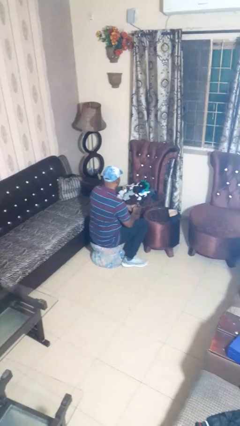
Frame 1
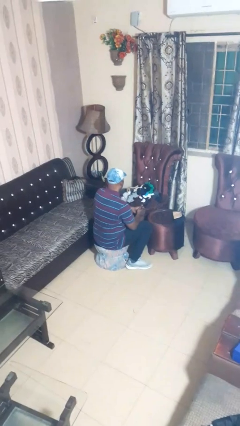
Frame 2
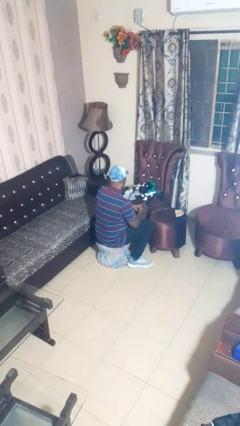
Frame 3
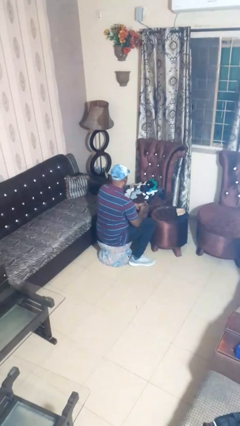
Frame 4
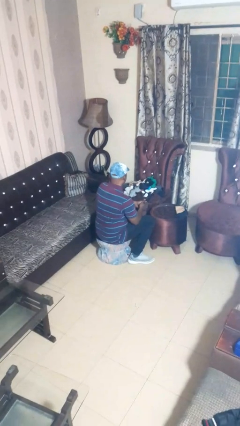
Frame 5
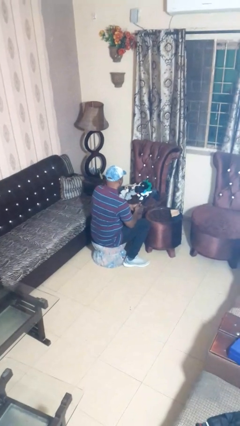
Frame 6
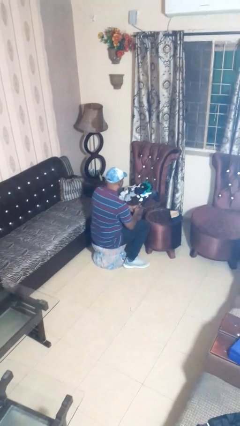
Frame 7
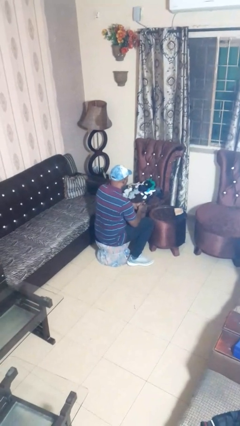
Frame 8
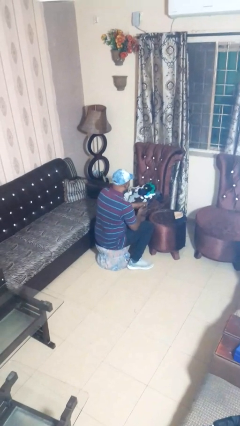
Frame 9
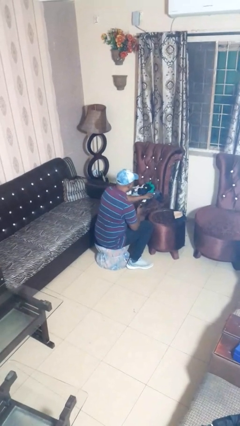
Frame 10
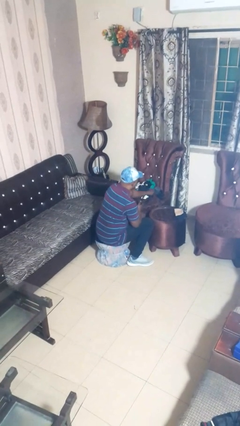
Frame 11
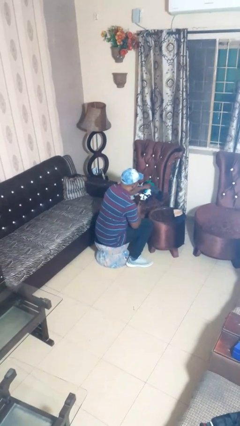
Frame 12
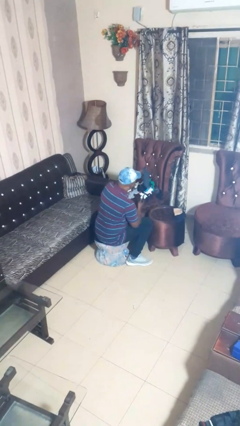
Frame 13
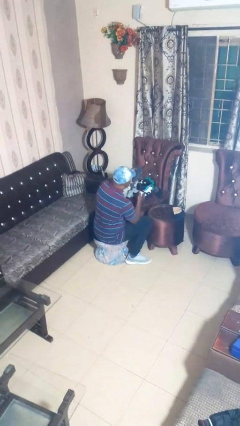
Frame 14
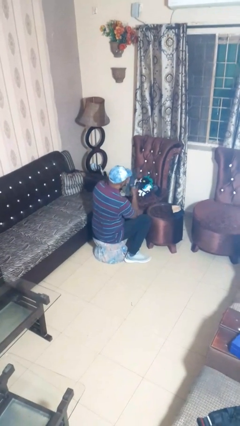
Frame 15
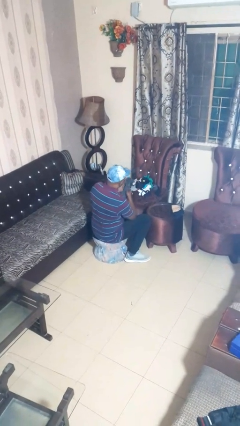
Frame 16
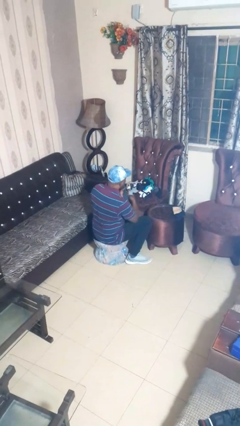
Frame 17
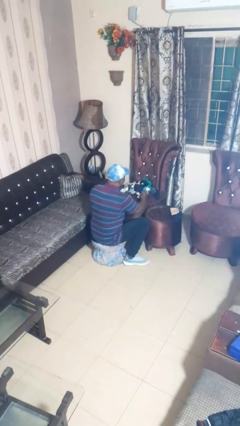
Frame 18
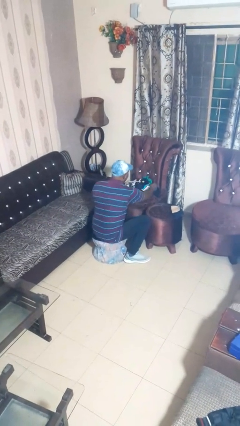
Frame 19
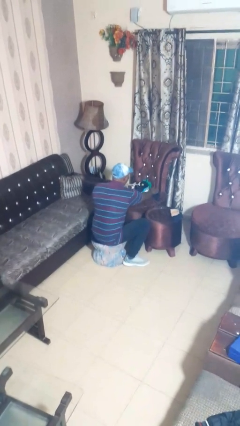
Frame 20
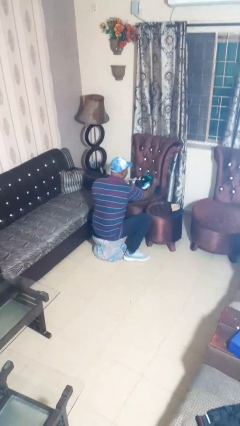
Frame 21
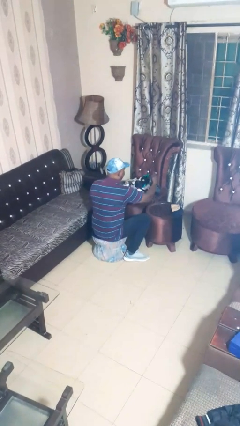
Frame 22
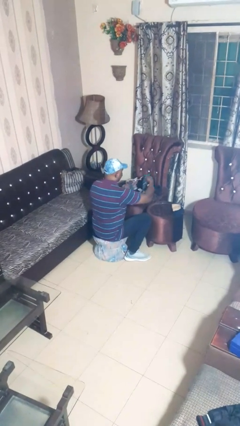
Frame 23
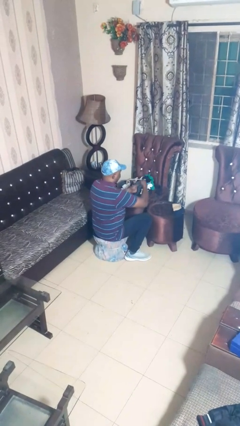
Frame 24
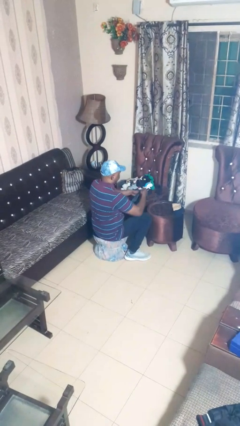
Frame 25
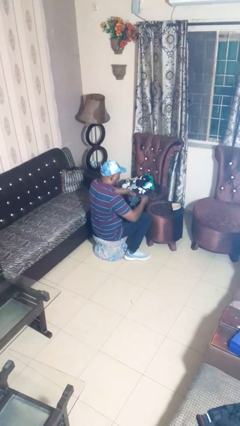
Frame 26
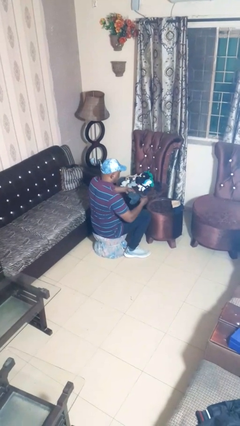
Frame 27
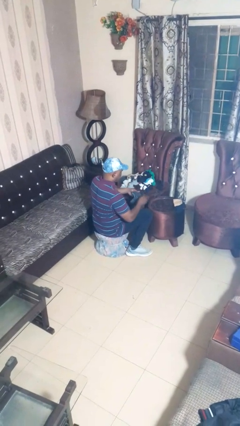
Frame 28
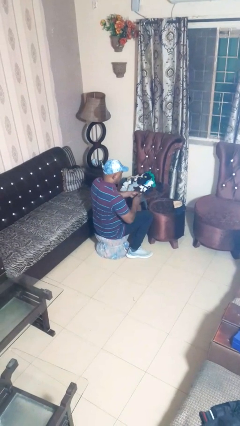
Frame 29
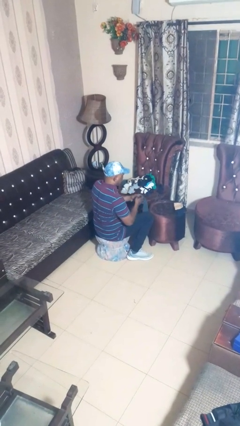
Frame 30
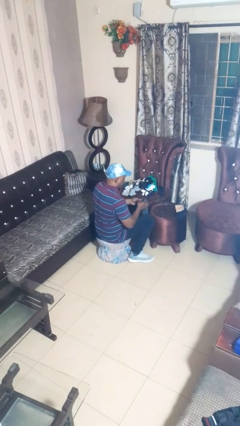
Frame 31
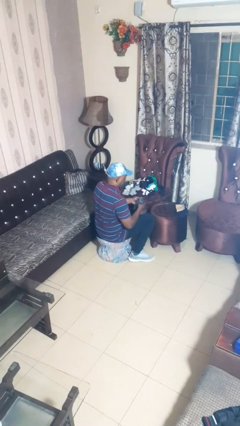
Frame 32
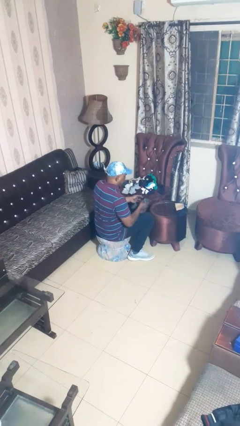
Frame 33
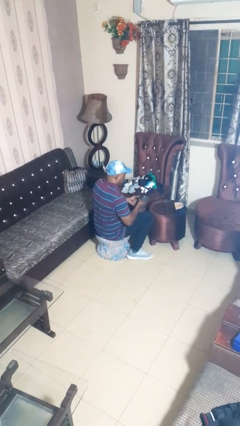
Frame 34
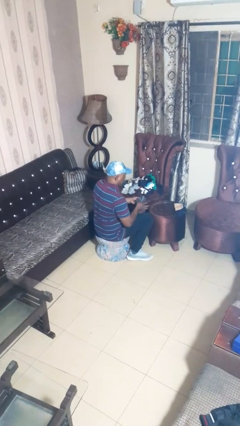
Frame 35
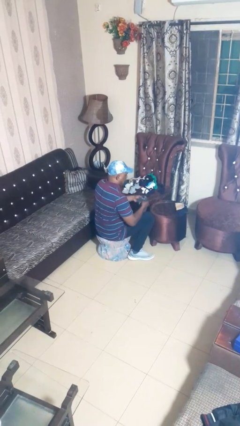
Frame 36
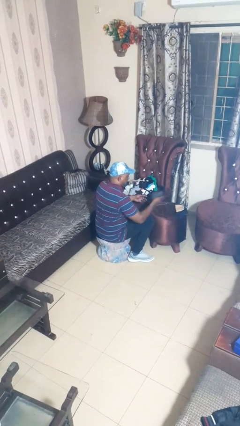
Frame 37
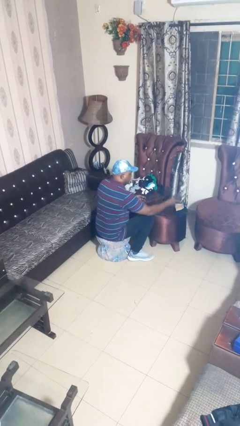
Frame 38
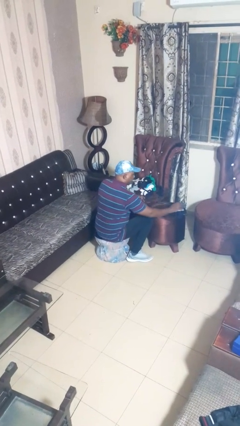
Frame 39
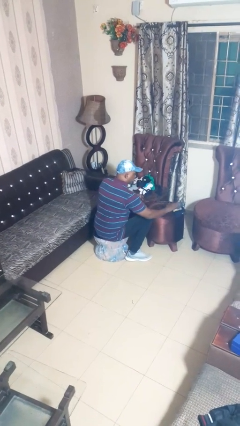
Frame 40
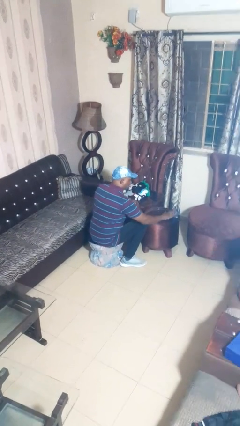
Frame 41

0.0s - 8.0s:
person folds socks

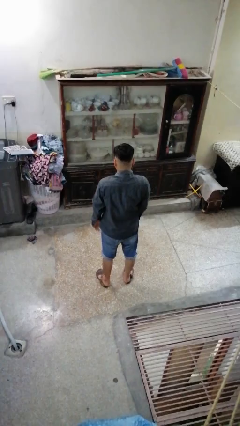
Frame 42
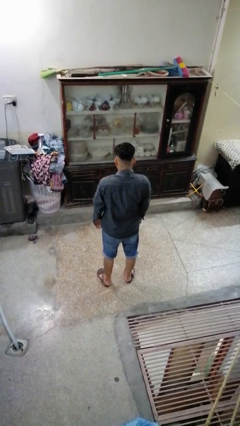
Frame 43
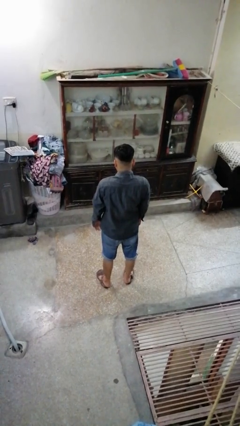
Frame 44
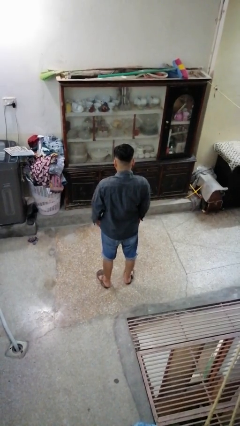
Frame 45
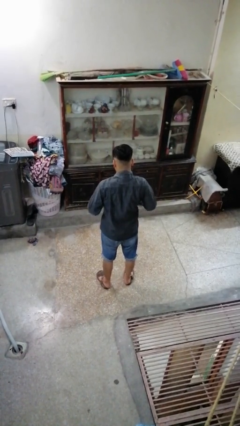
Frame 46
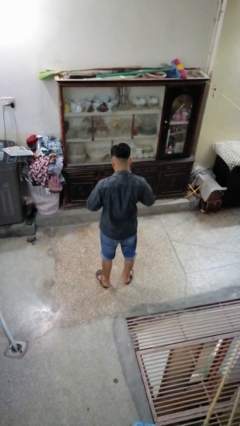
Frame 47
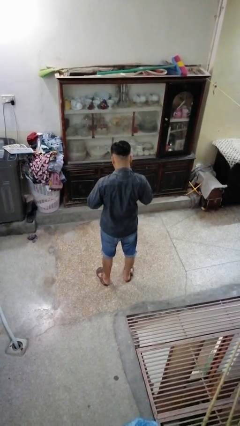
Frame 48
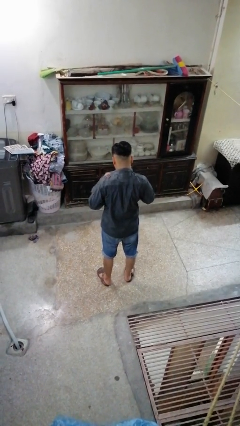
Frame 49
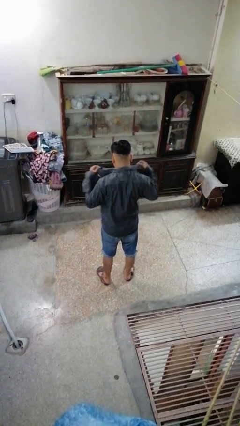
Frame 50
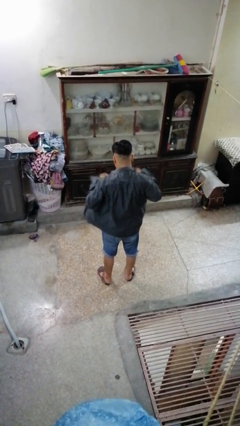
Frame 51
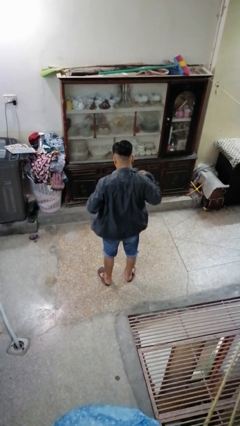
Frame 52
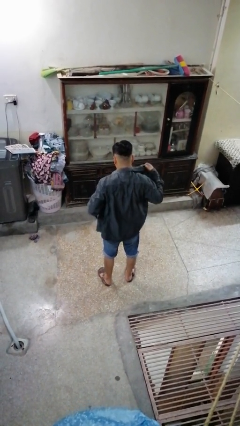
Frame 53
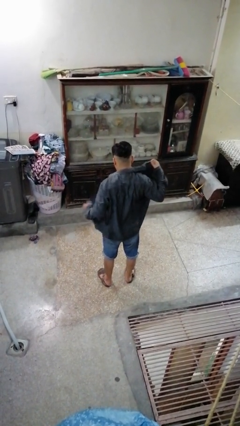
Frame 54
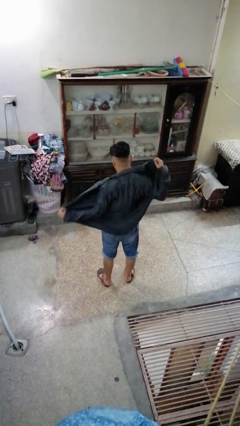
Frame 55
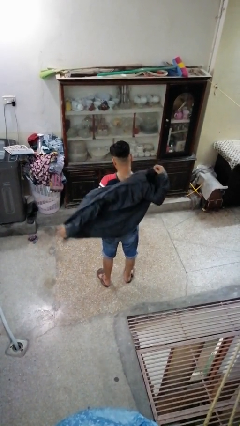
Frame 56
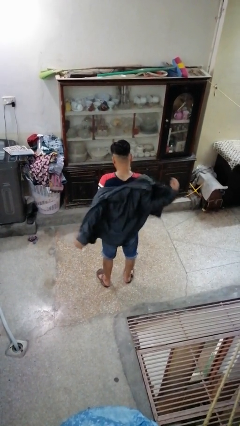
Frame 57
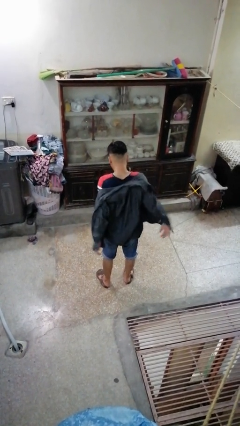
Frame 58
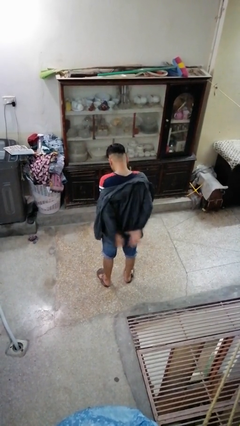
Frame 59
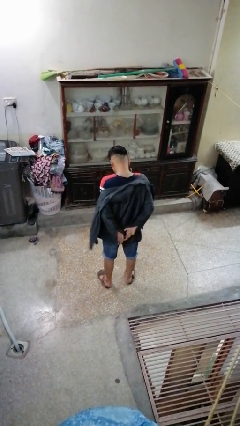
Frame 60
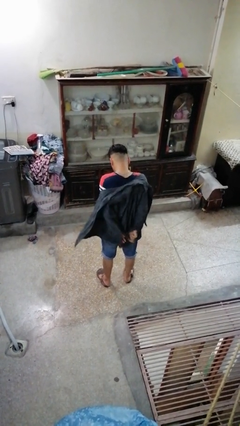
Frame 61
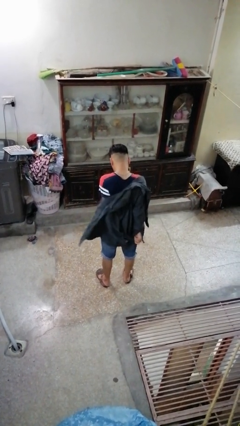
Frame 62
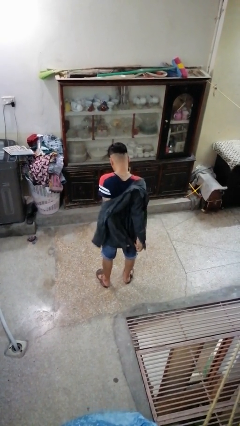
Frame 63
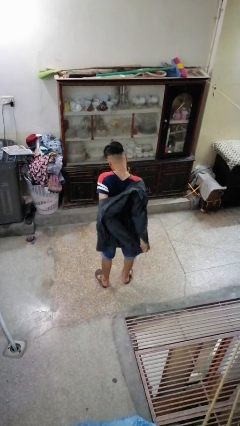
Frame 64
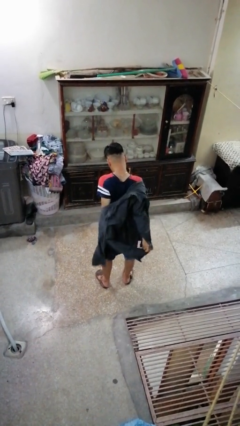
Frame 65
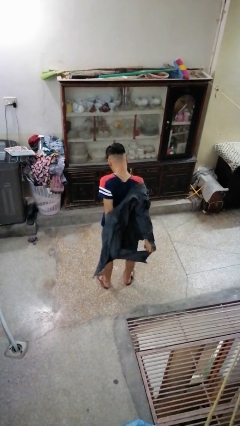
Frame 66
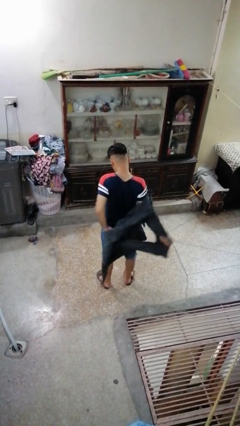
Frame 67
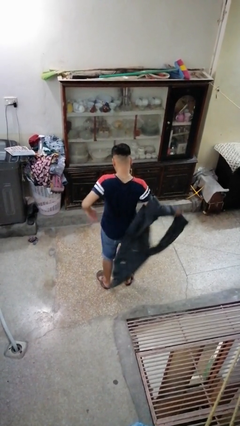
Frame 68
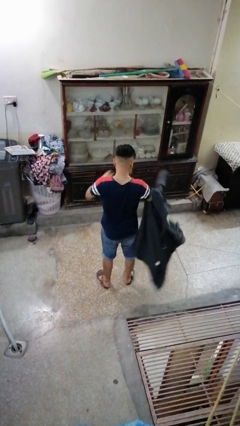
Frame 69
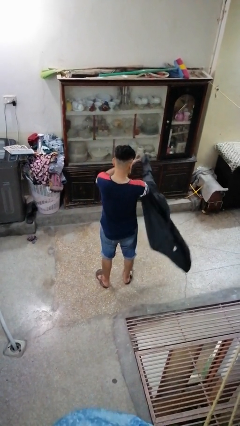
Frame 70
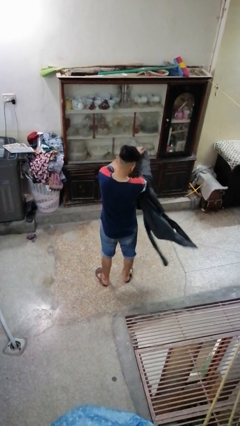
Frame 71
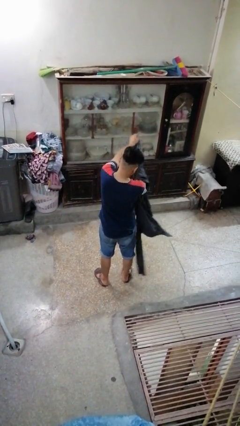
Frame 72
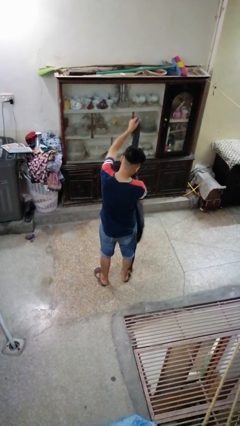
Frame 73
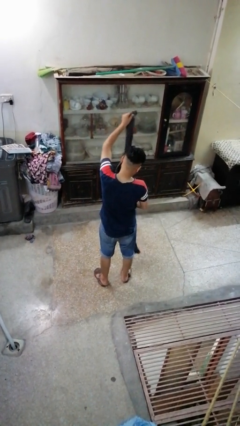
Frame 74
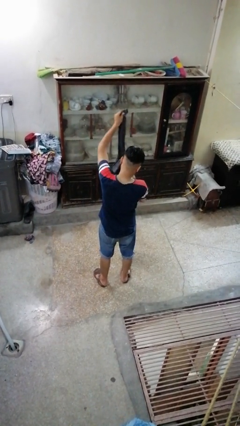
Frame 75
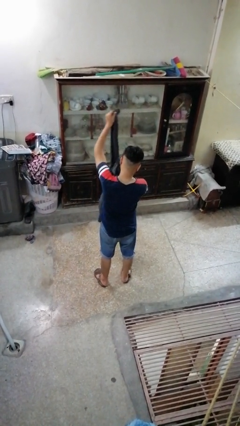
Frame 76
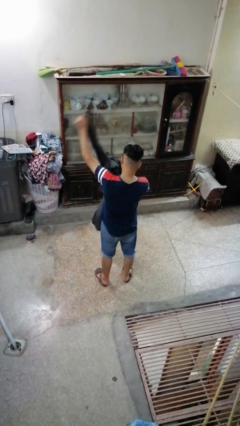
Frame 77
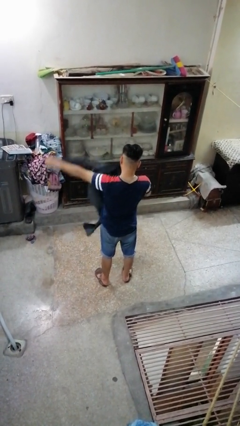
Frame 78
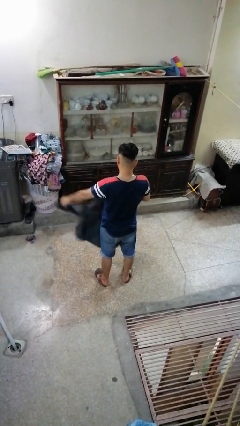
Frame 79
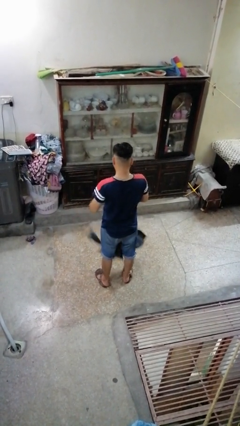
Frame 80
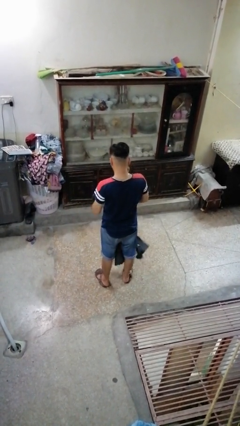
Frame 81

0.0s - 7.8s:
person takes off shirt

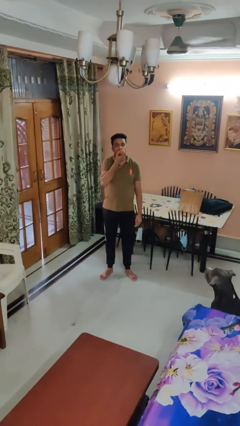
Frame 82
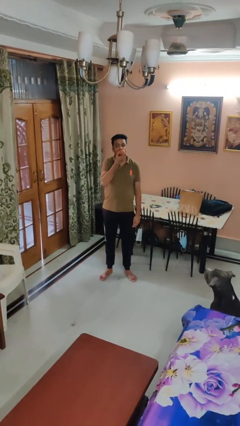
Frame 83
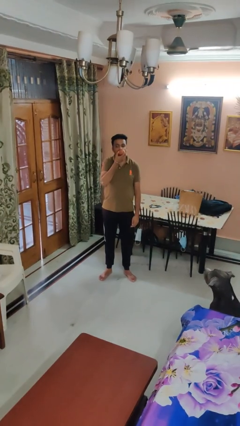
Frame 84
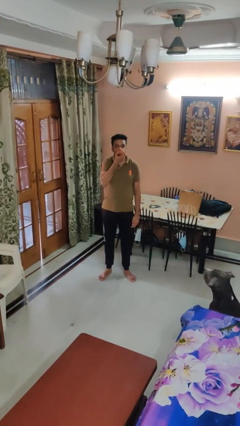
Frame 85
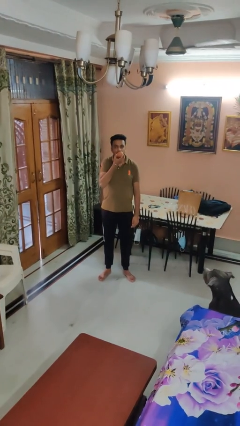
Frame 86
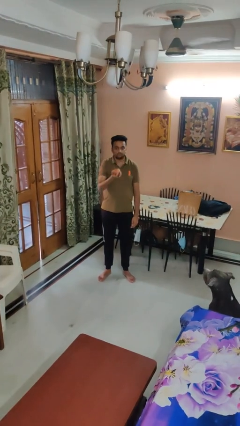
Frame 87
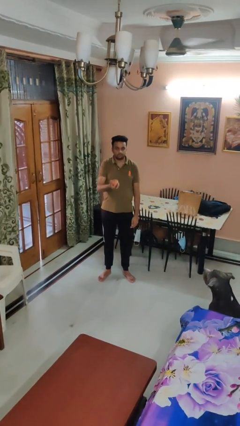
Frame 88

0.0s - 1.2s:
person eats apple

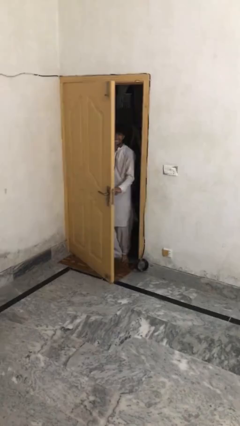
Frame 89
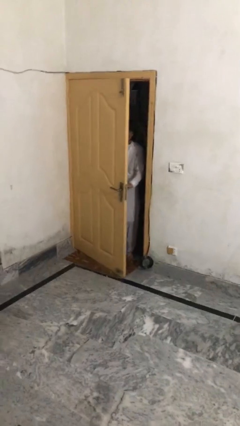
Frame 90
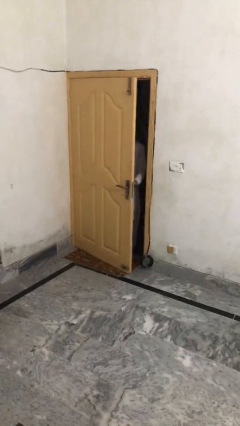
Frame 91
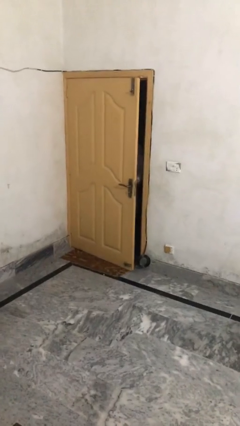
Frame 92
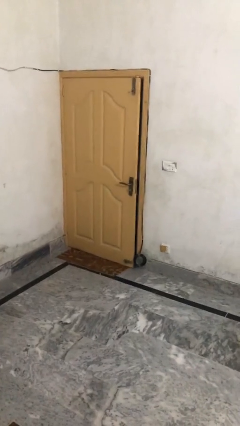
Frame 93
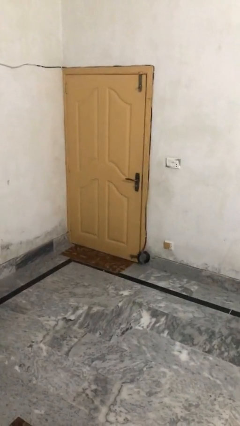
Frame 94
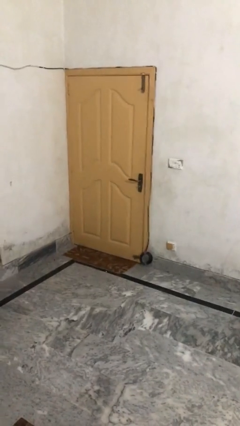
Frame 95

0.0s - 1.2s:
person closes facility door
